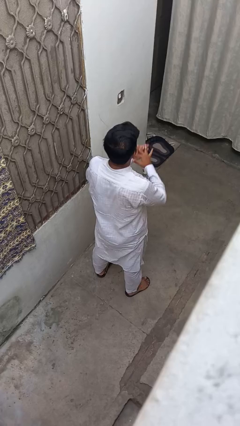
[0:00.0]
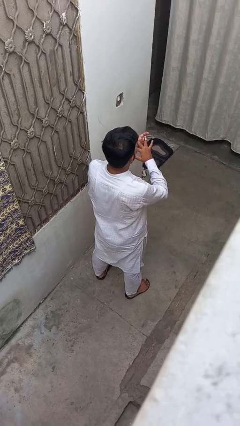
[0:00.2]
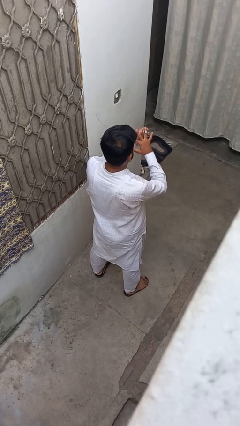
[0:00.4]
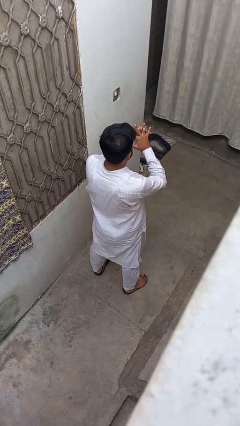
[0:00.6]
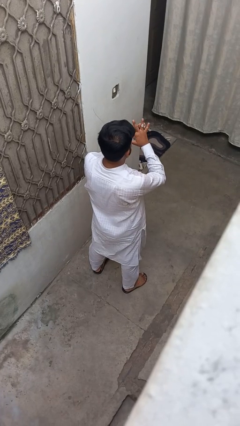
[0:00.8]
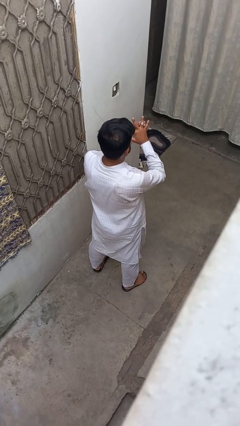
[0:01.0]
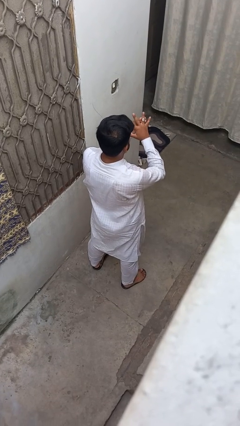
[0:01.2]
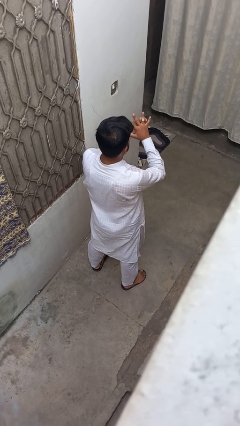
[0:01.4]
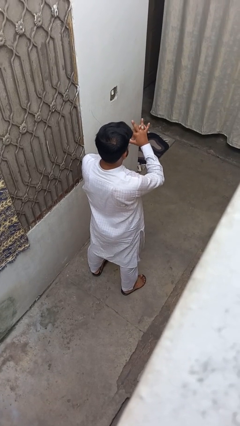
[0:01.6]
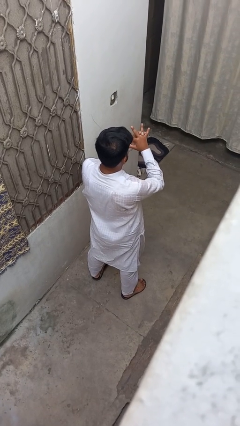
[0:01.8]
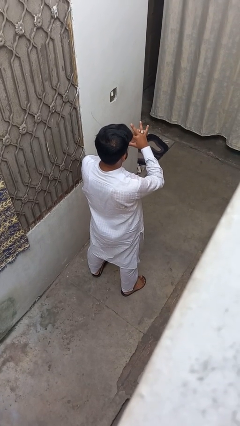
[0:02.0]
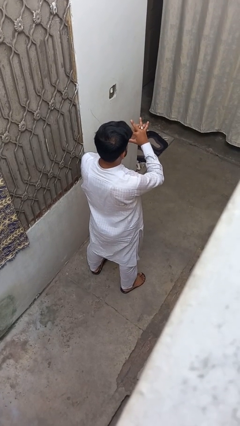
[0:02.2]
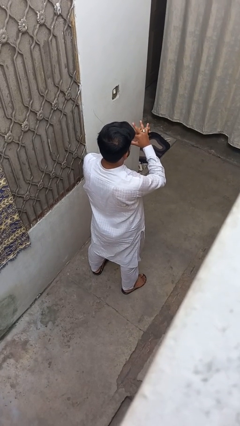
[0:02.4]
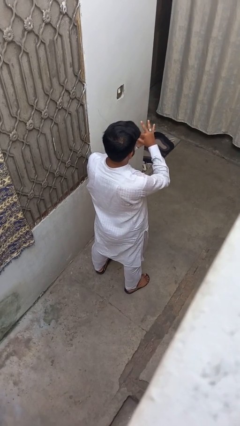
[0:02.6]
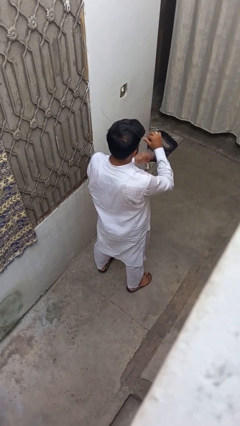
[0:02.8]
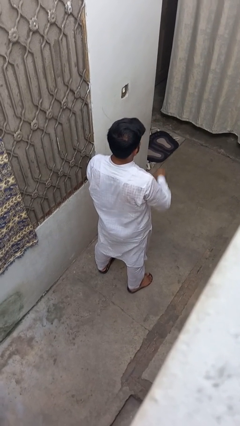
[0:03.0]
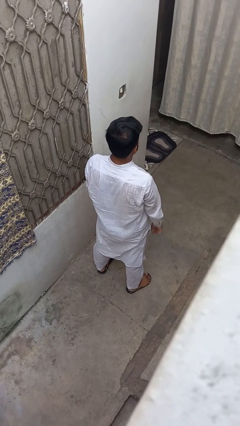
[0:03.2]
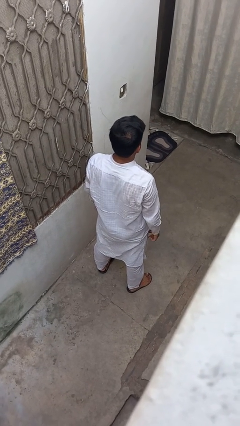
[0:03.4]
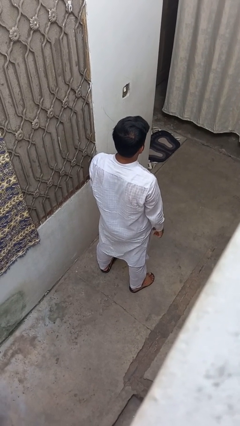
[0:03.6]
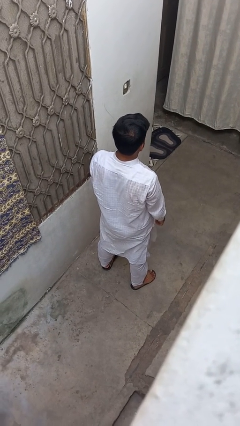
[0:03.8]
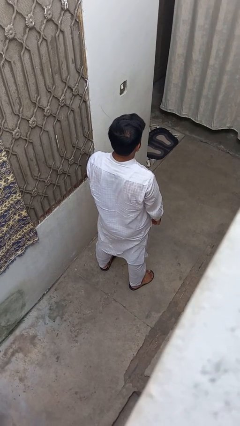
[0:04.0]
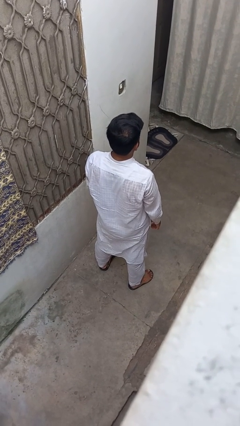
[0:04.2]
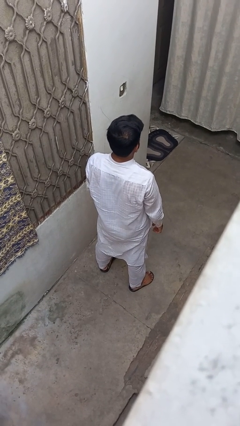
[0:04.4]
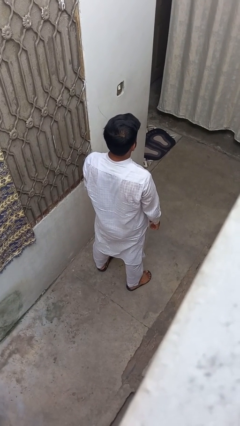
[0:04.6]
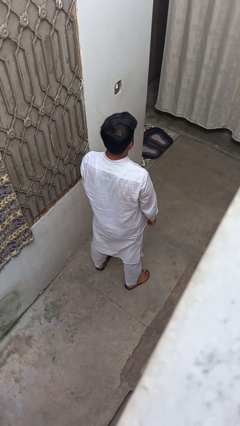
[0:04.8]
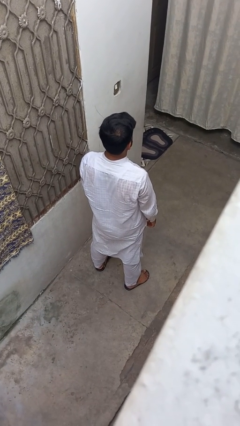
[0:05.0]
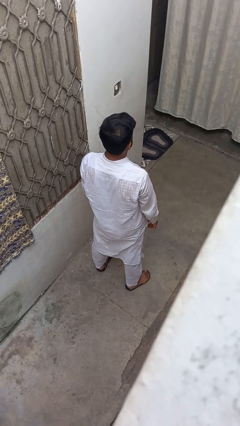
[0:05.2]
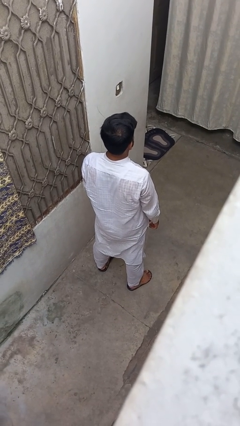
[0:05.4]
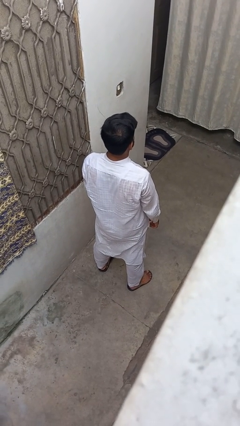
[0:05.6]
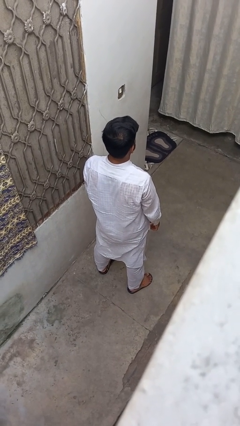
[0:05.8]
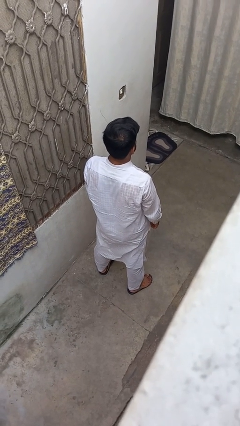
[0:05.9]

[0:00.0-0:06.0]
person puts on ring

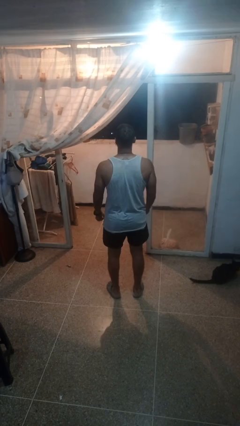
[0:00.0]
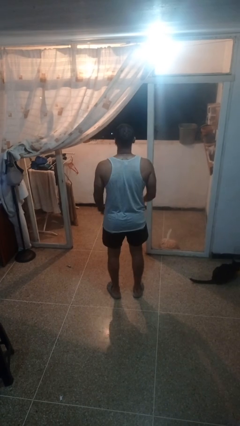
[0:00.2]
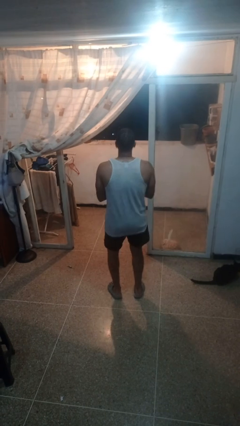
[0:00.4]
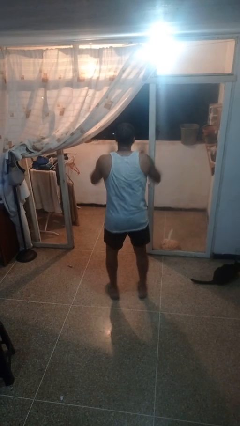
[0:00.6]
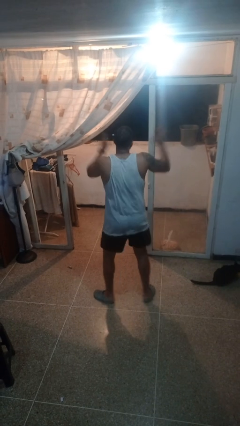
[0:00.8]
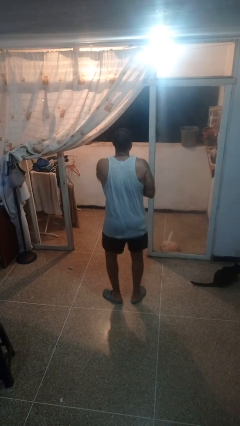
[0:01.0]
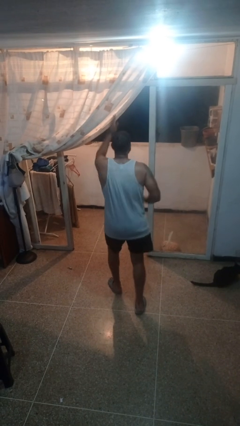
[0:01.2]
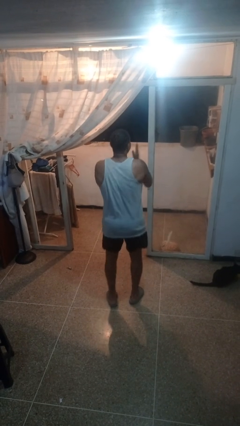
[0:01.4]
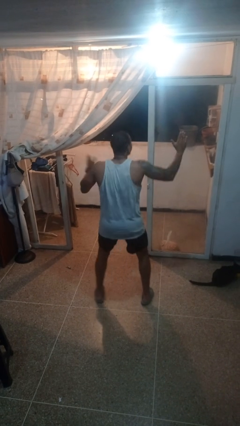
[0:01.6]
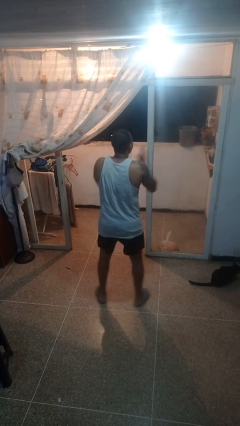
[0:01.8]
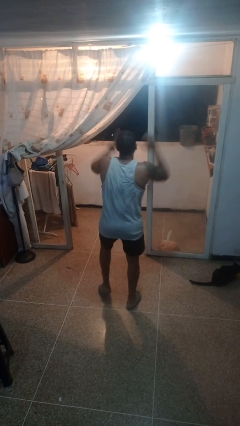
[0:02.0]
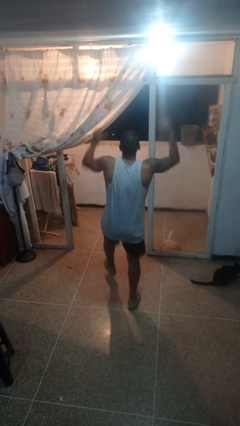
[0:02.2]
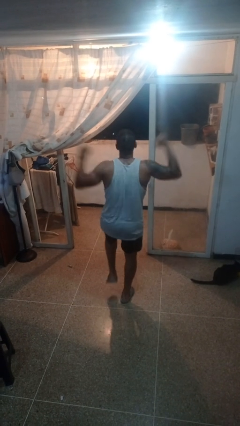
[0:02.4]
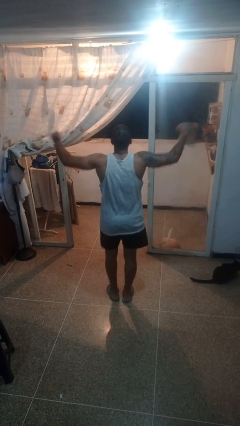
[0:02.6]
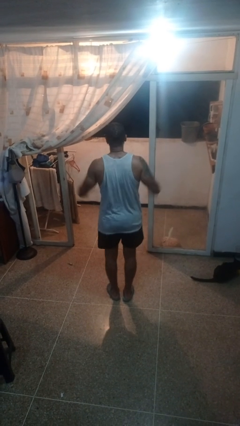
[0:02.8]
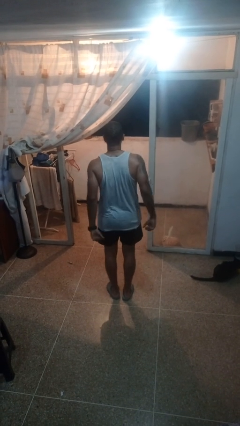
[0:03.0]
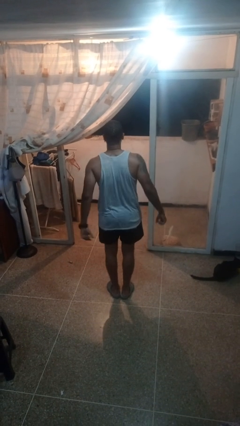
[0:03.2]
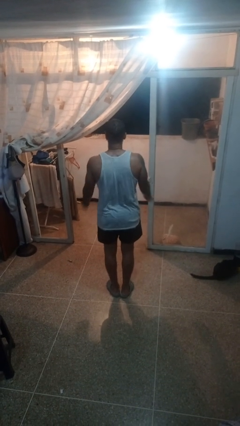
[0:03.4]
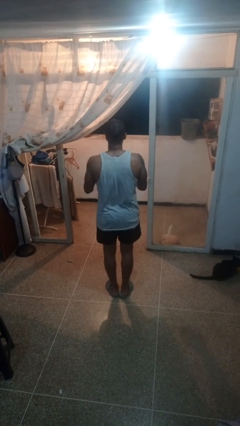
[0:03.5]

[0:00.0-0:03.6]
person dances in place

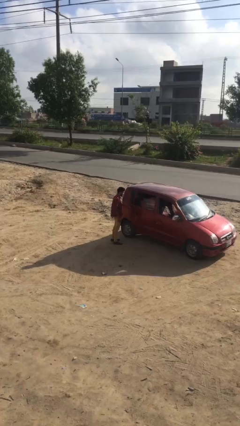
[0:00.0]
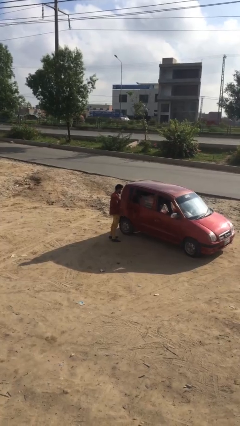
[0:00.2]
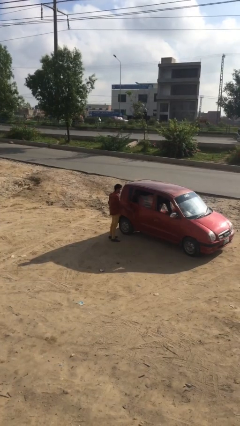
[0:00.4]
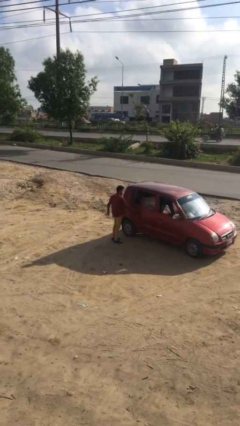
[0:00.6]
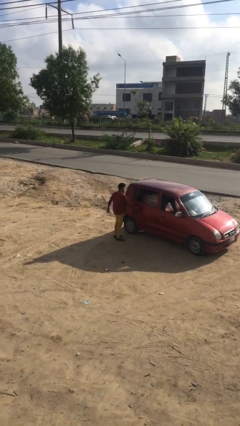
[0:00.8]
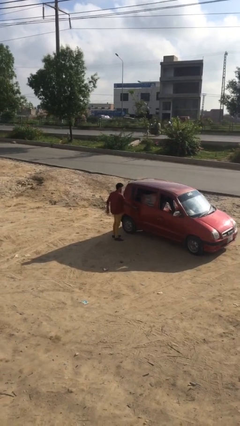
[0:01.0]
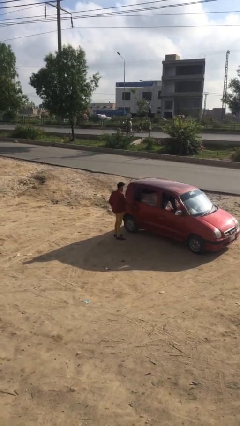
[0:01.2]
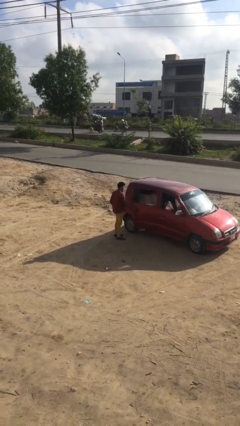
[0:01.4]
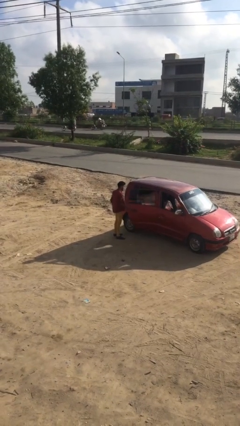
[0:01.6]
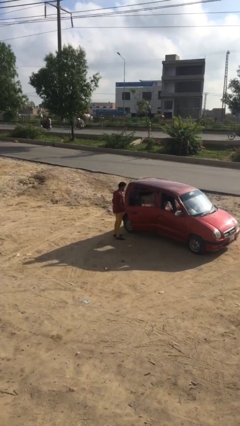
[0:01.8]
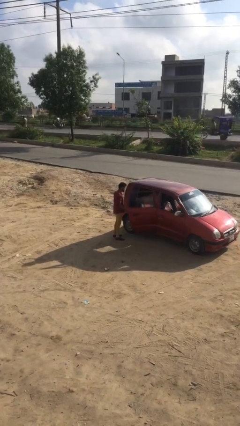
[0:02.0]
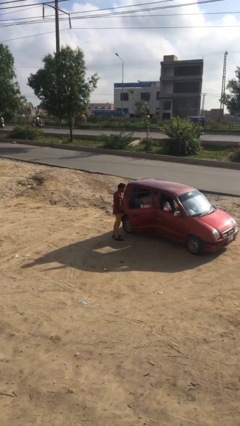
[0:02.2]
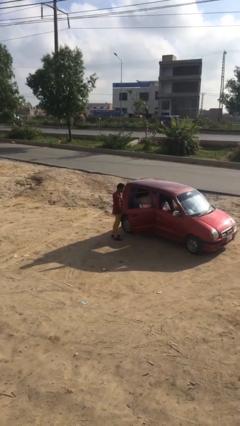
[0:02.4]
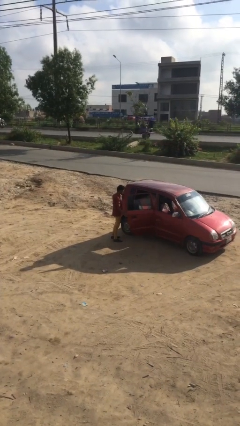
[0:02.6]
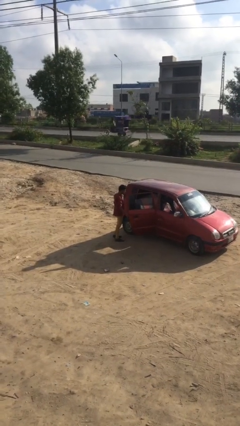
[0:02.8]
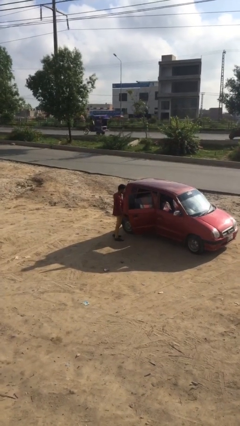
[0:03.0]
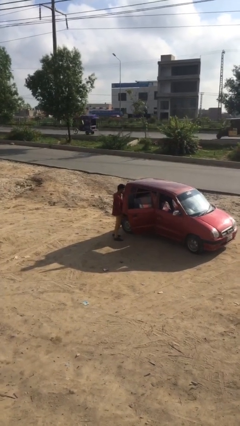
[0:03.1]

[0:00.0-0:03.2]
person opens car door

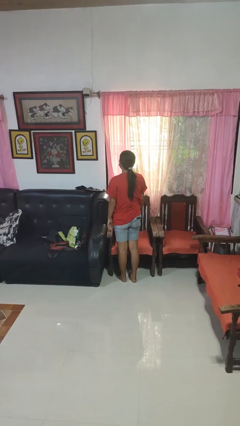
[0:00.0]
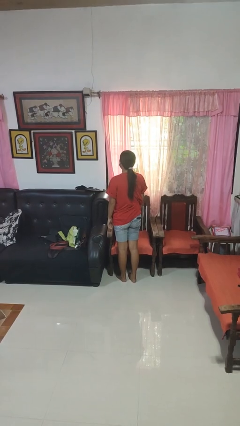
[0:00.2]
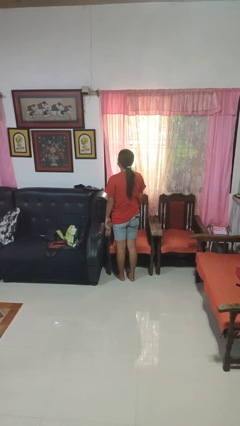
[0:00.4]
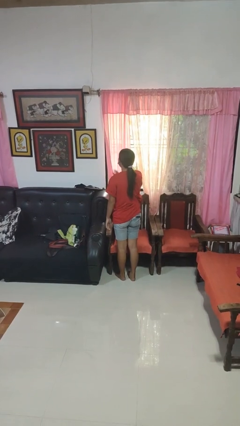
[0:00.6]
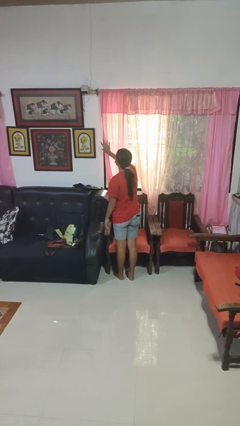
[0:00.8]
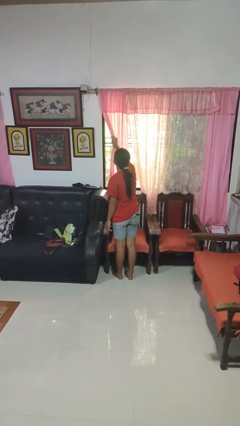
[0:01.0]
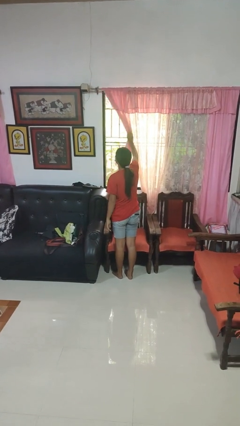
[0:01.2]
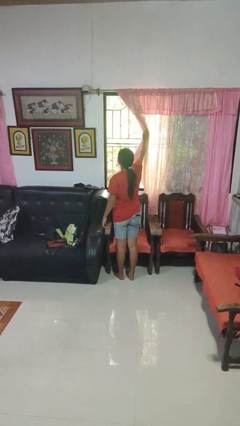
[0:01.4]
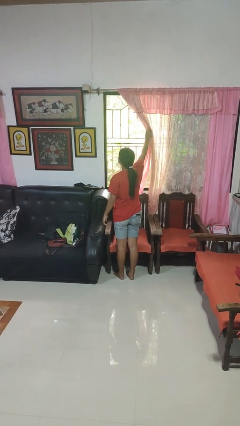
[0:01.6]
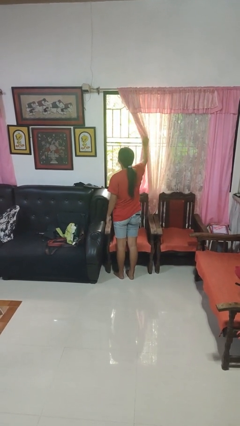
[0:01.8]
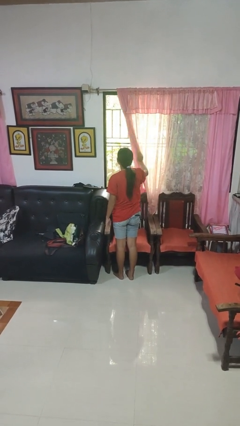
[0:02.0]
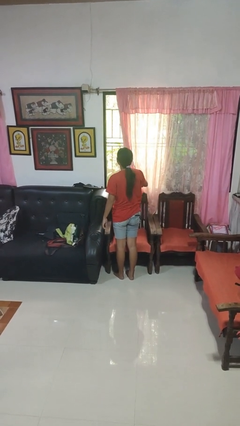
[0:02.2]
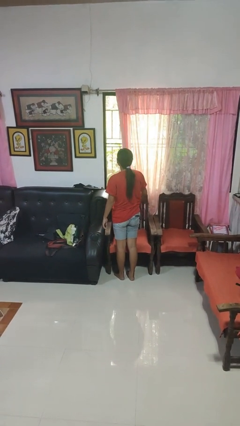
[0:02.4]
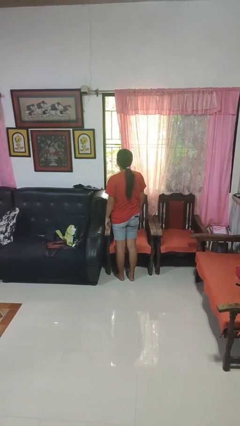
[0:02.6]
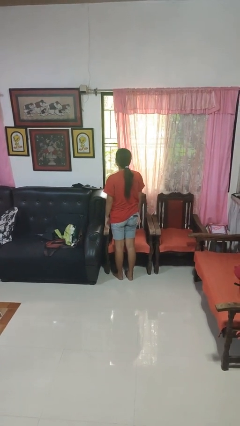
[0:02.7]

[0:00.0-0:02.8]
person opens curtains

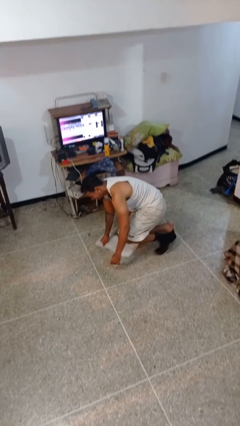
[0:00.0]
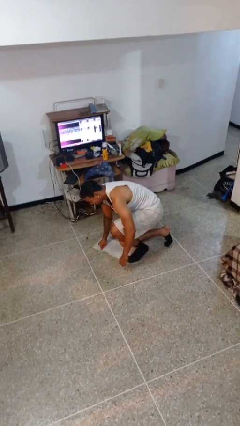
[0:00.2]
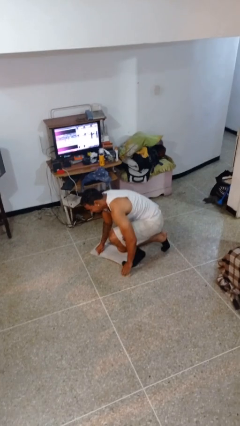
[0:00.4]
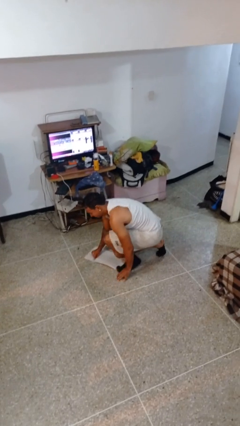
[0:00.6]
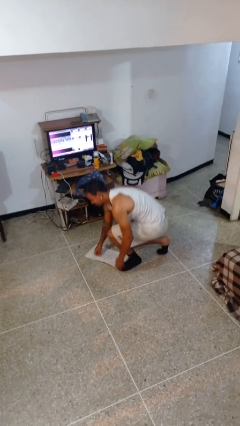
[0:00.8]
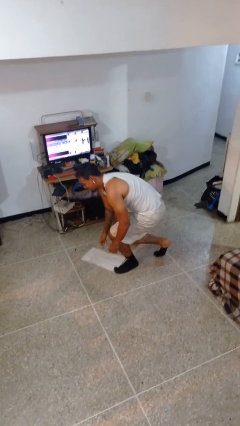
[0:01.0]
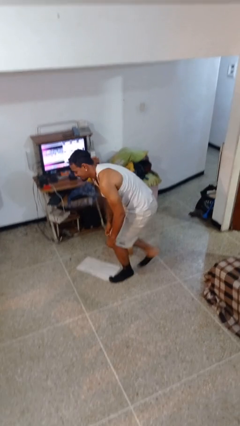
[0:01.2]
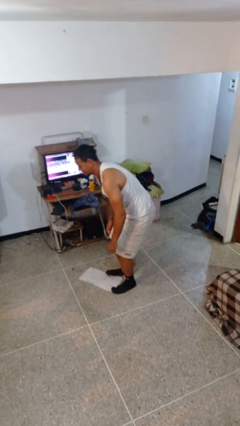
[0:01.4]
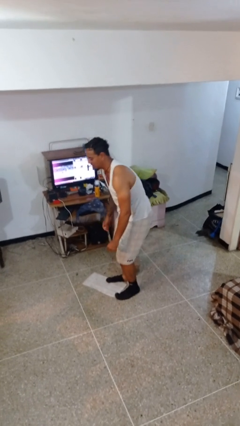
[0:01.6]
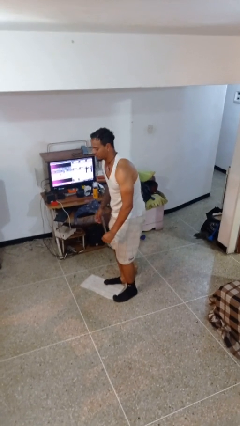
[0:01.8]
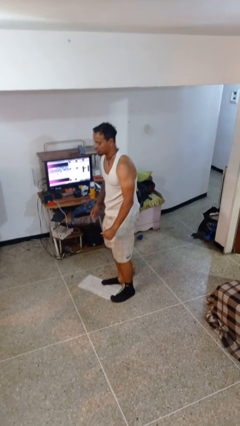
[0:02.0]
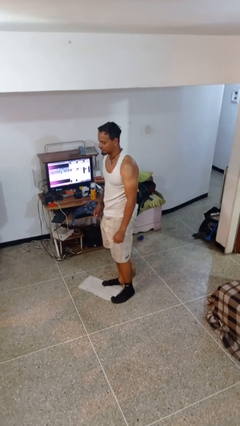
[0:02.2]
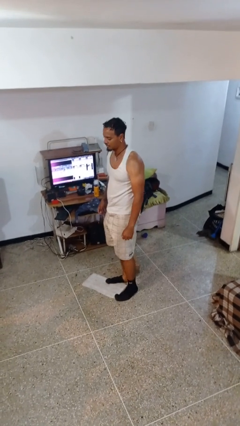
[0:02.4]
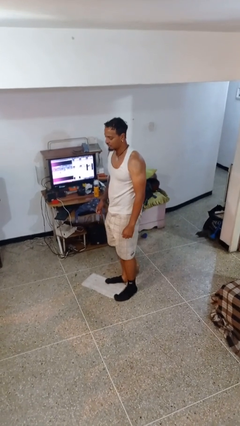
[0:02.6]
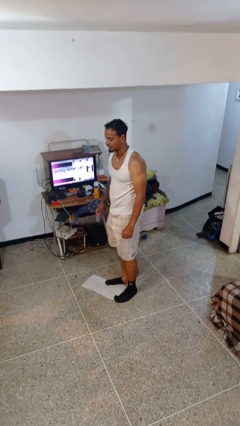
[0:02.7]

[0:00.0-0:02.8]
person stands up from floor
